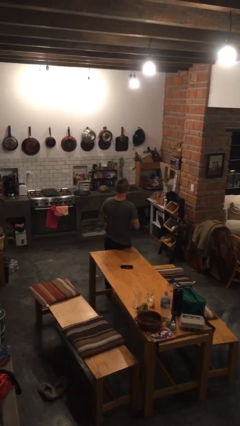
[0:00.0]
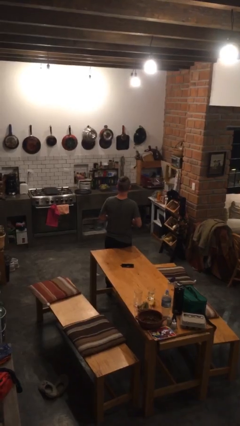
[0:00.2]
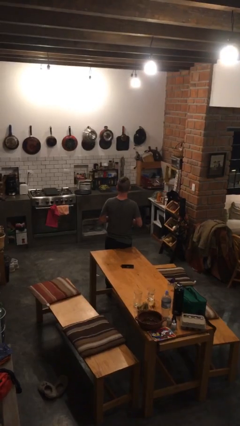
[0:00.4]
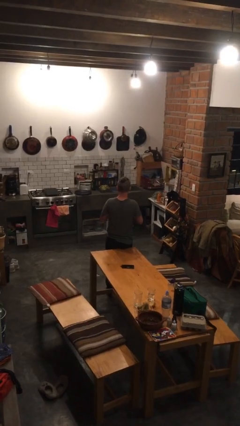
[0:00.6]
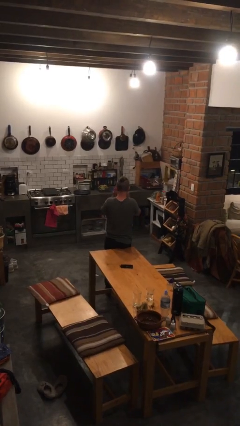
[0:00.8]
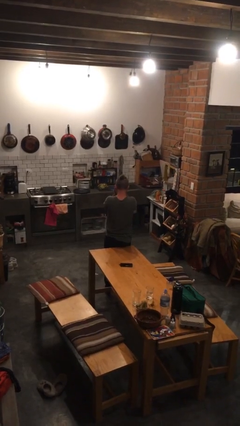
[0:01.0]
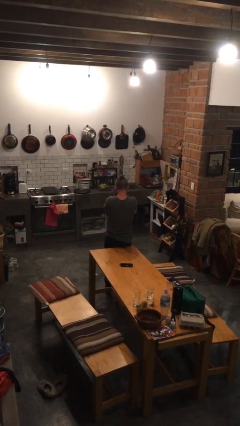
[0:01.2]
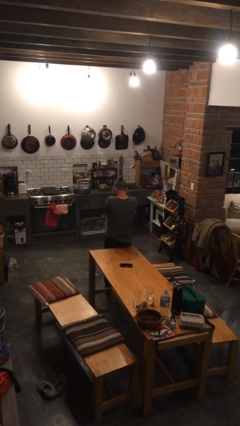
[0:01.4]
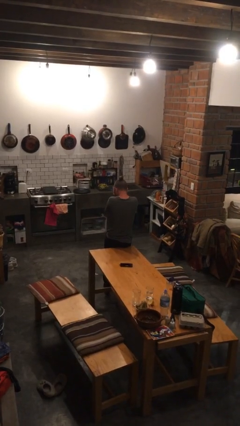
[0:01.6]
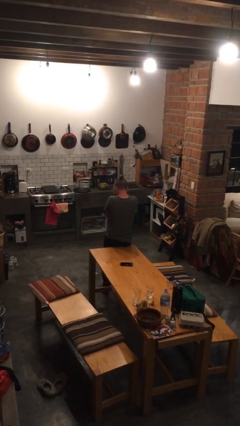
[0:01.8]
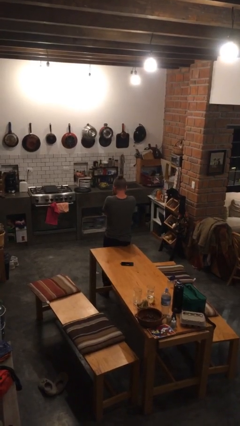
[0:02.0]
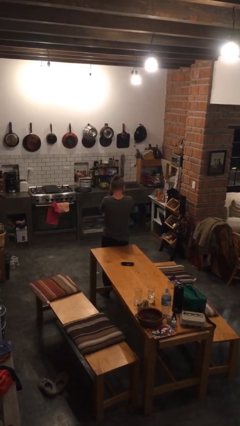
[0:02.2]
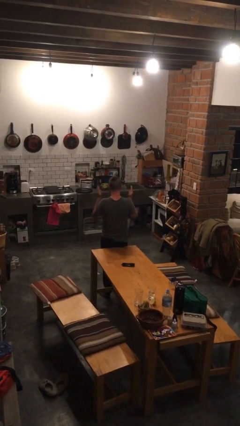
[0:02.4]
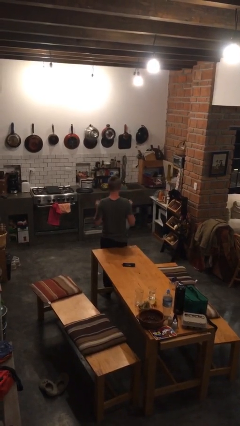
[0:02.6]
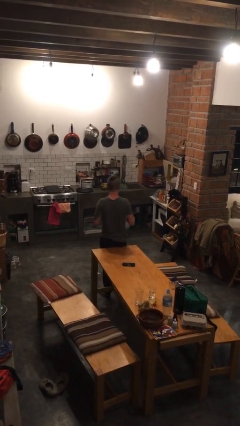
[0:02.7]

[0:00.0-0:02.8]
person covers face with hands

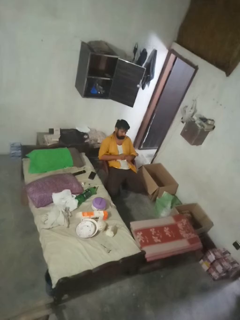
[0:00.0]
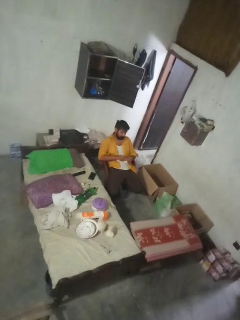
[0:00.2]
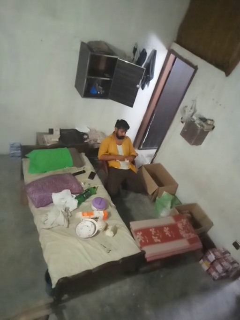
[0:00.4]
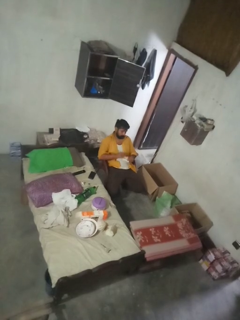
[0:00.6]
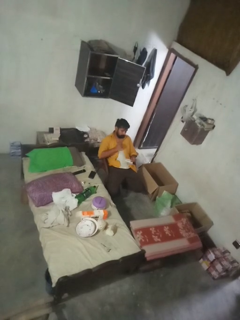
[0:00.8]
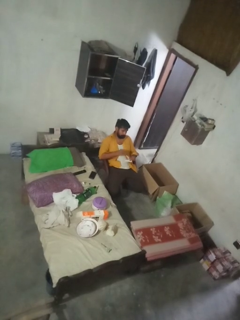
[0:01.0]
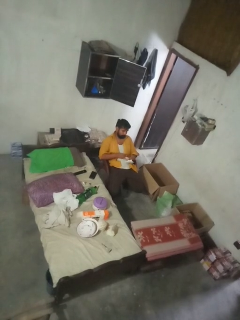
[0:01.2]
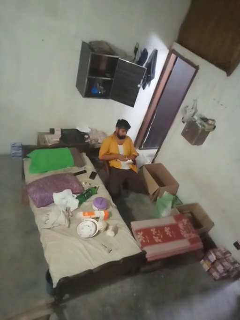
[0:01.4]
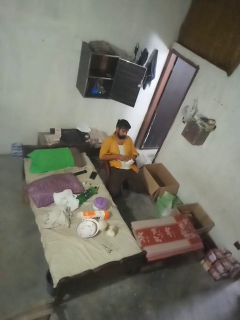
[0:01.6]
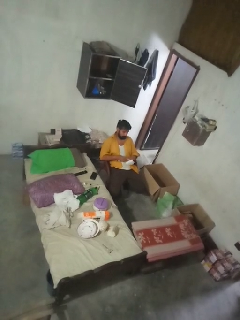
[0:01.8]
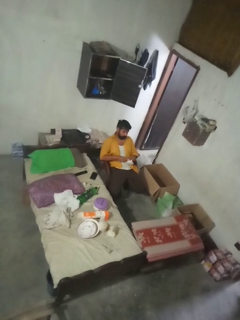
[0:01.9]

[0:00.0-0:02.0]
person tears paper

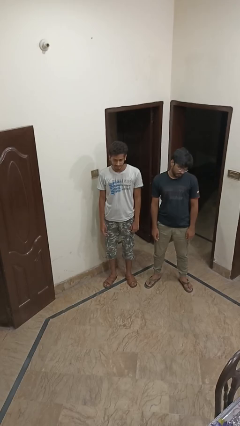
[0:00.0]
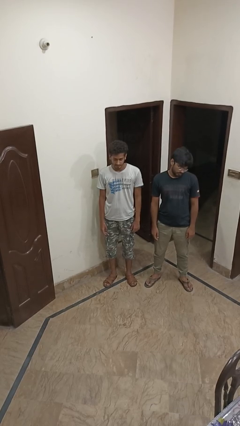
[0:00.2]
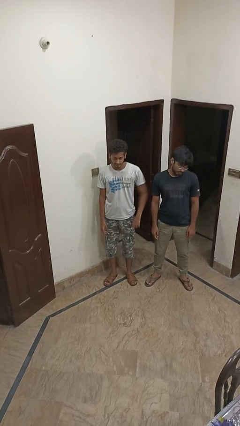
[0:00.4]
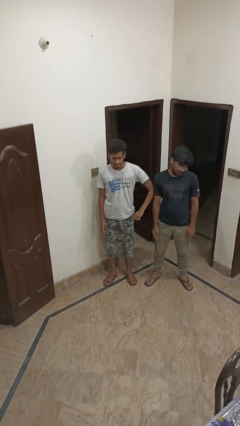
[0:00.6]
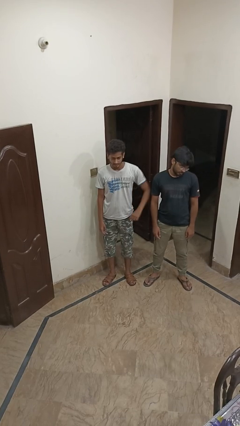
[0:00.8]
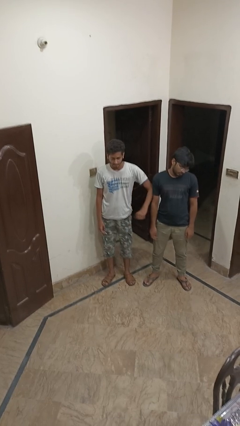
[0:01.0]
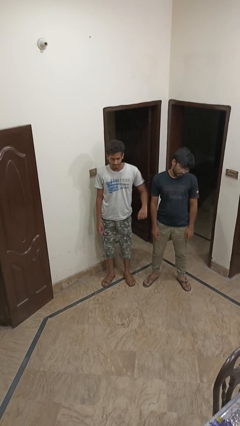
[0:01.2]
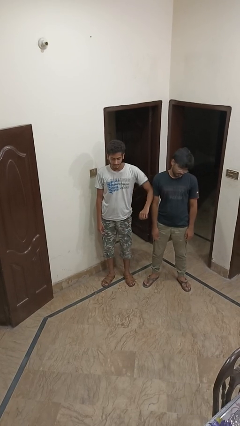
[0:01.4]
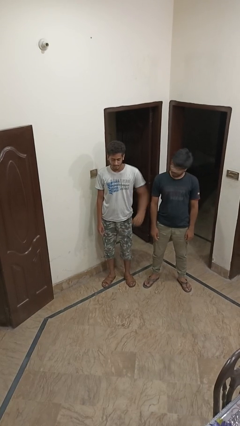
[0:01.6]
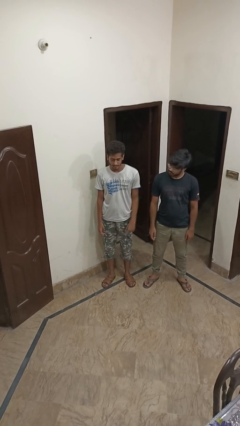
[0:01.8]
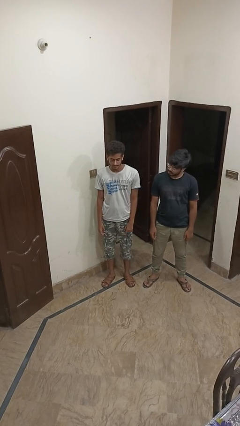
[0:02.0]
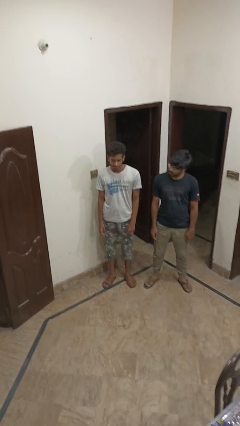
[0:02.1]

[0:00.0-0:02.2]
person nudges person with elbow

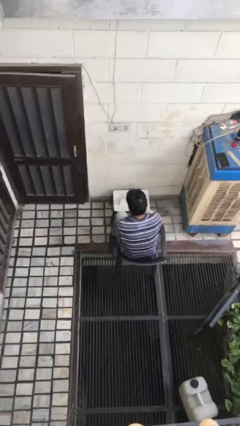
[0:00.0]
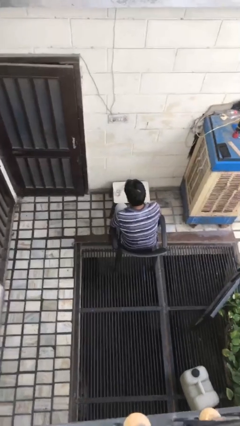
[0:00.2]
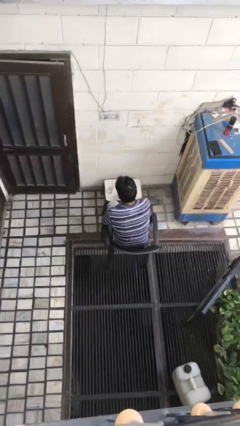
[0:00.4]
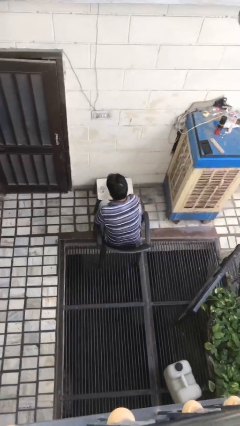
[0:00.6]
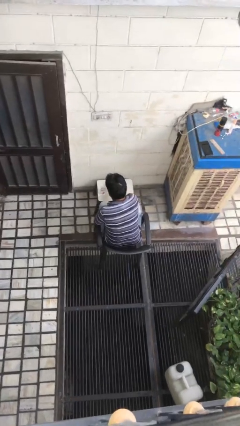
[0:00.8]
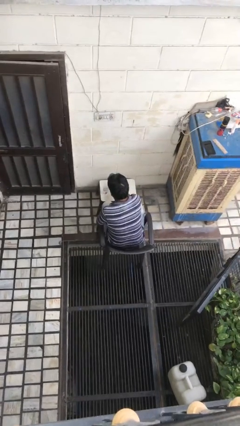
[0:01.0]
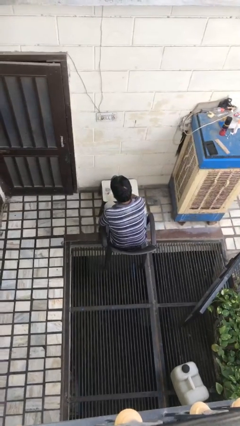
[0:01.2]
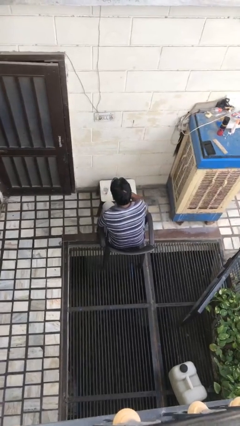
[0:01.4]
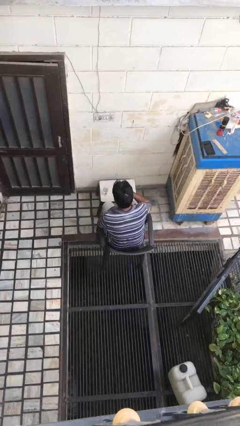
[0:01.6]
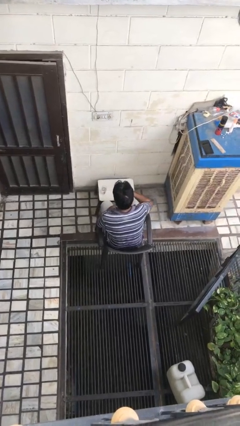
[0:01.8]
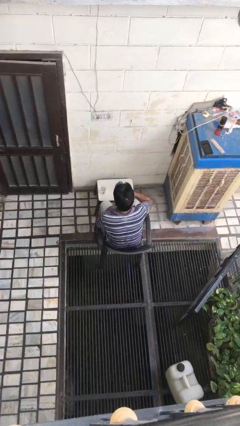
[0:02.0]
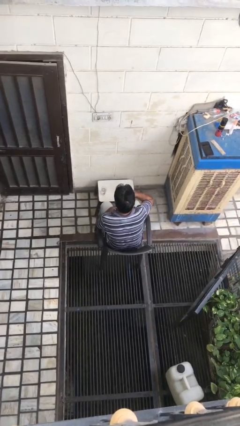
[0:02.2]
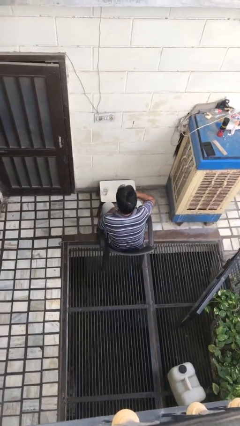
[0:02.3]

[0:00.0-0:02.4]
person picks up object from table

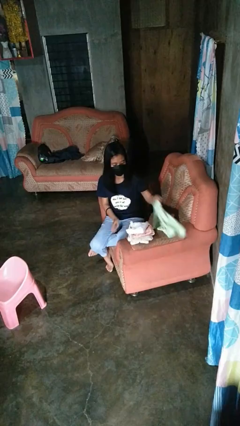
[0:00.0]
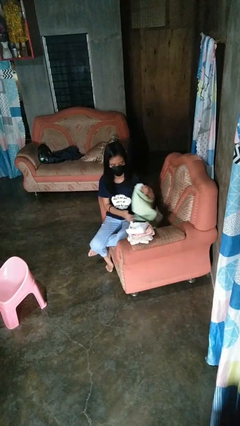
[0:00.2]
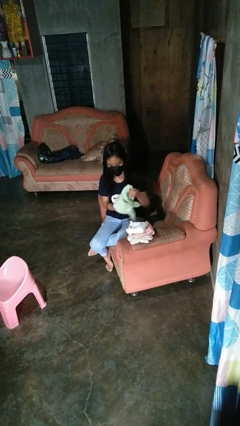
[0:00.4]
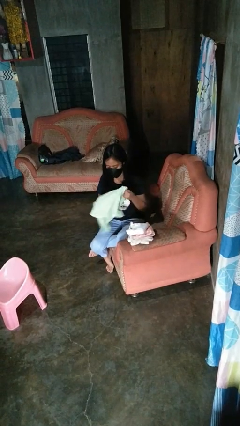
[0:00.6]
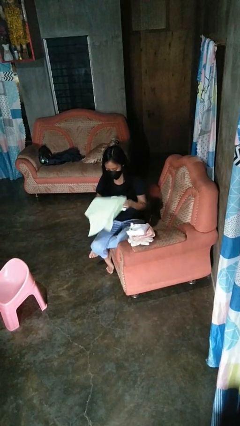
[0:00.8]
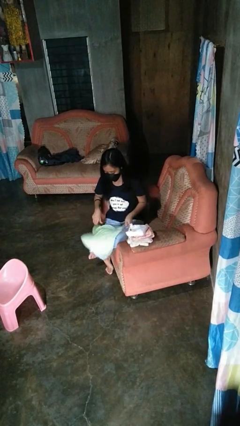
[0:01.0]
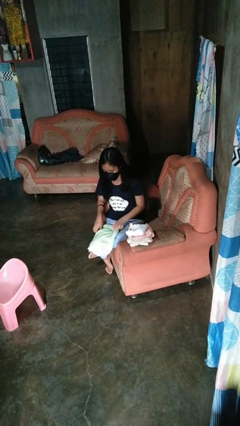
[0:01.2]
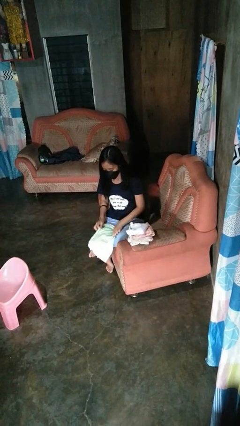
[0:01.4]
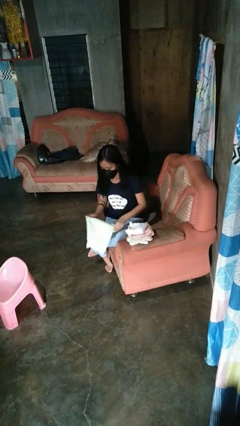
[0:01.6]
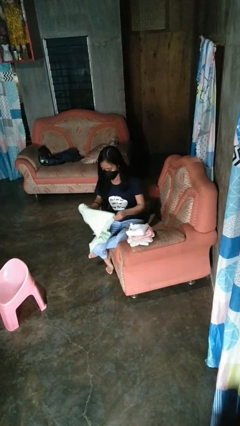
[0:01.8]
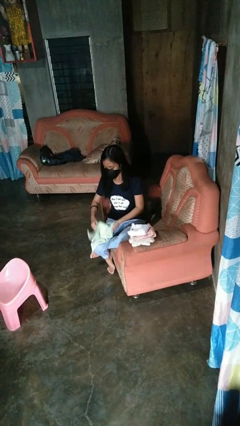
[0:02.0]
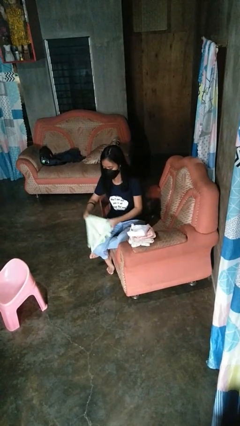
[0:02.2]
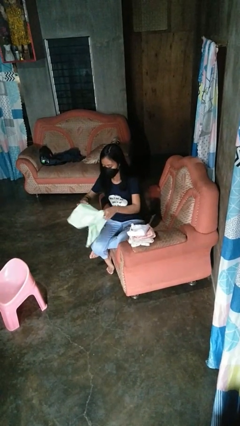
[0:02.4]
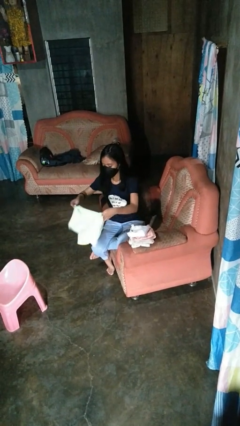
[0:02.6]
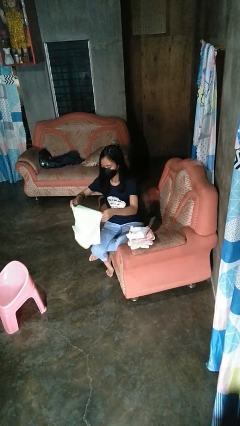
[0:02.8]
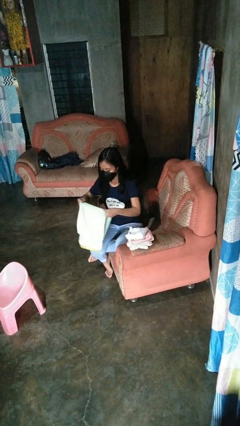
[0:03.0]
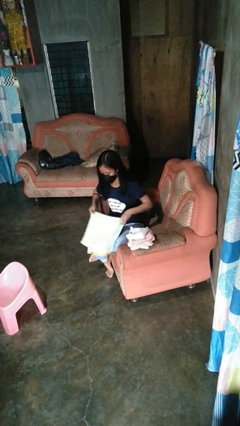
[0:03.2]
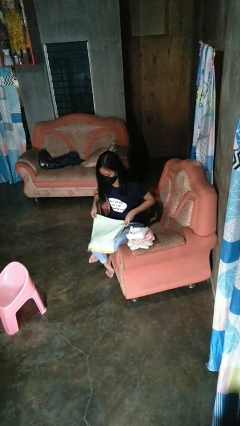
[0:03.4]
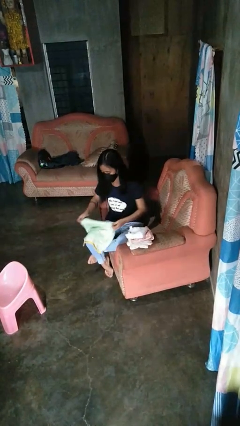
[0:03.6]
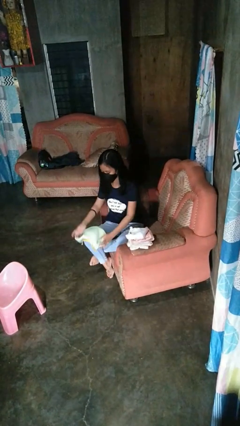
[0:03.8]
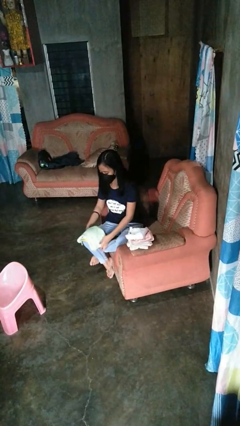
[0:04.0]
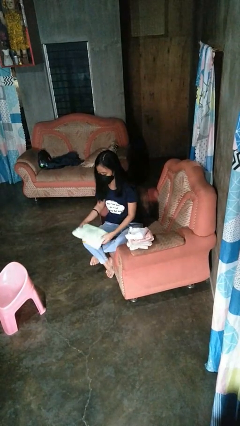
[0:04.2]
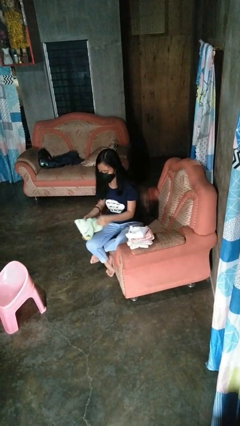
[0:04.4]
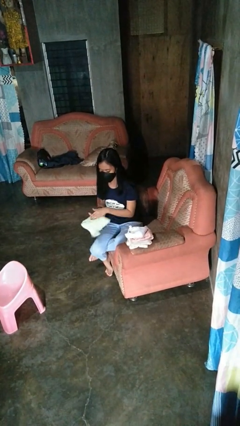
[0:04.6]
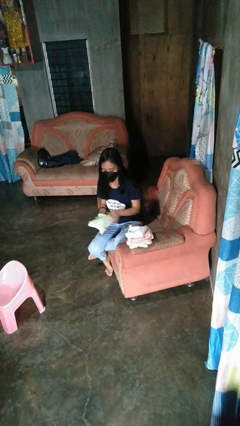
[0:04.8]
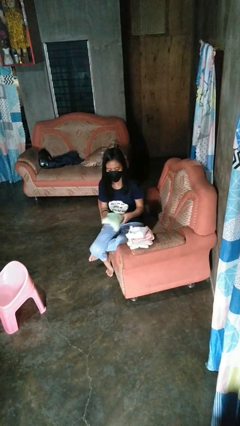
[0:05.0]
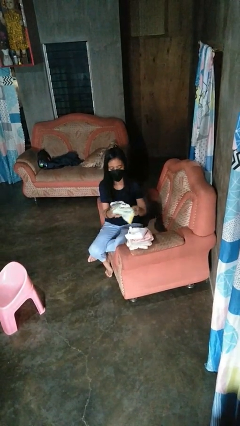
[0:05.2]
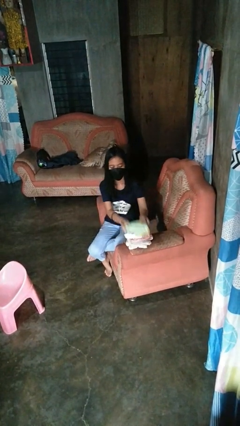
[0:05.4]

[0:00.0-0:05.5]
person folds towel

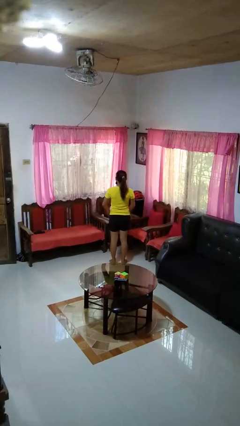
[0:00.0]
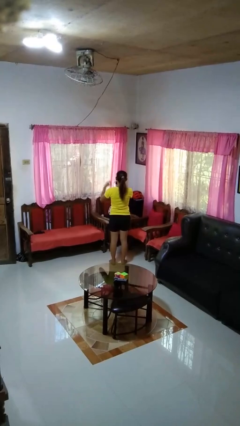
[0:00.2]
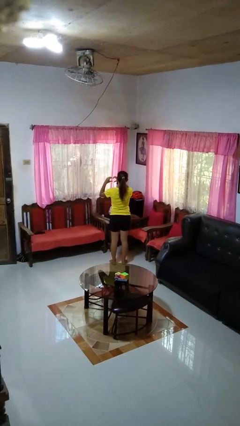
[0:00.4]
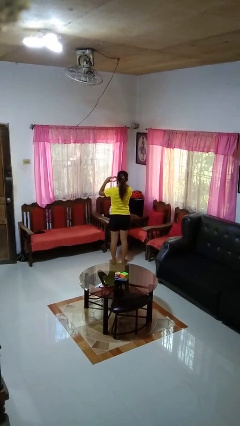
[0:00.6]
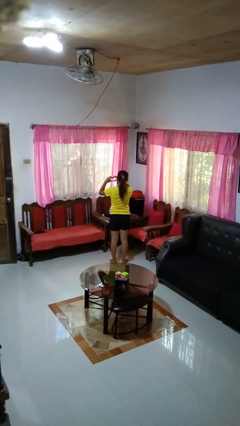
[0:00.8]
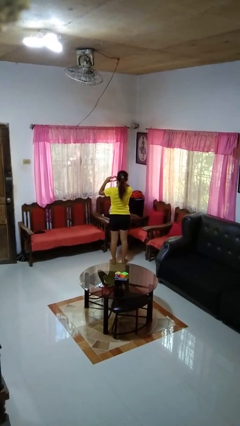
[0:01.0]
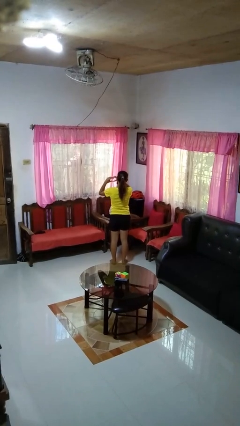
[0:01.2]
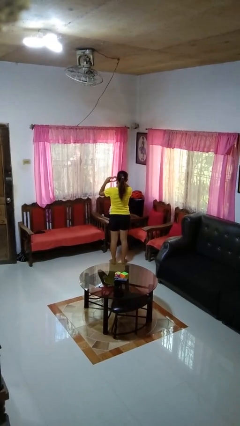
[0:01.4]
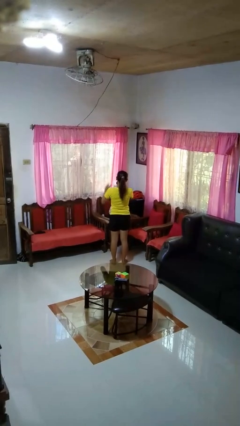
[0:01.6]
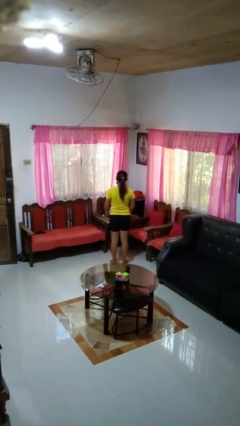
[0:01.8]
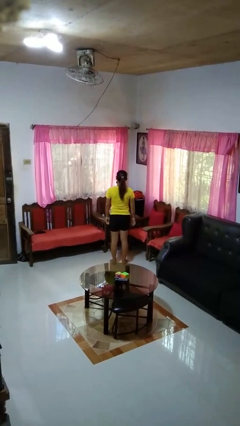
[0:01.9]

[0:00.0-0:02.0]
person gestures heart

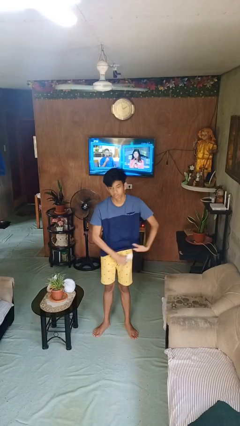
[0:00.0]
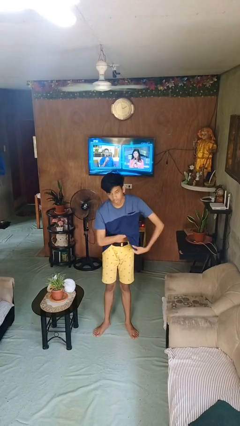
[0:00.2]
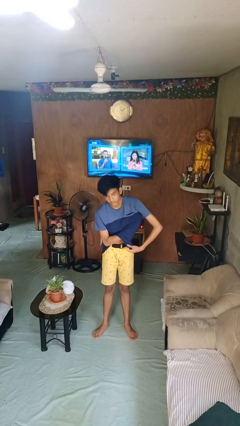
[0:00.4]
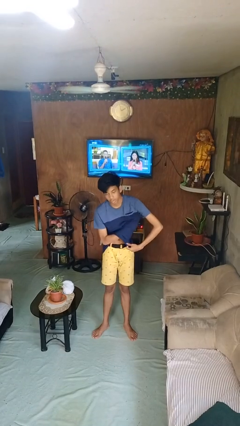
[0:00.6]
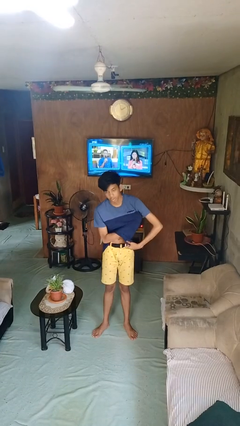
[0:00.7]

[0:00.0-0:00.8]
person applies deodorant
